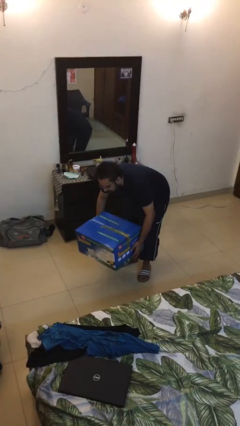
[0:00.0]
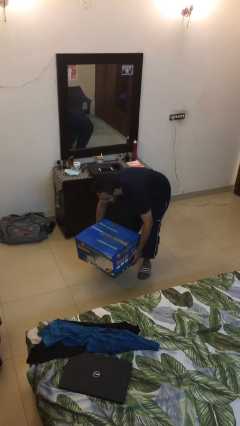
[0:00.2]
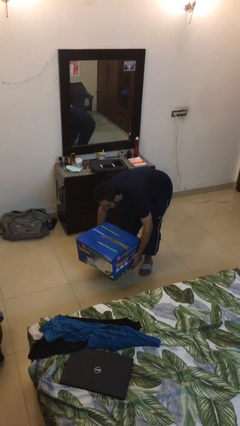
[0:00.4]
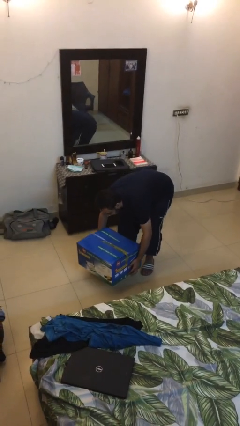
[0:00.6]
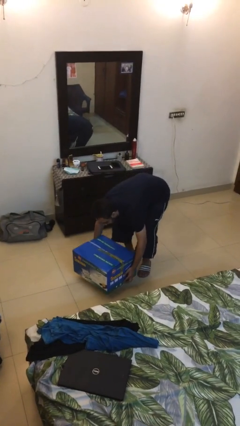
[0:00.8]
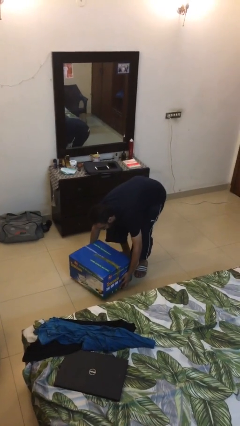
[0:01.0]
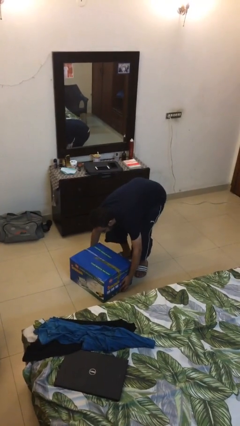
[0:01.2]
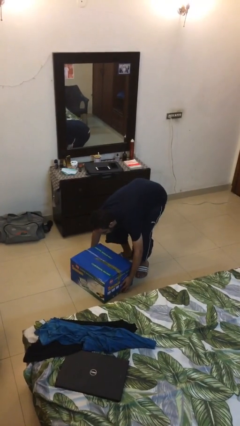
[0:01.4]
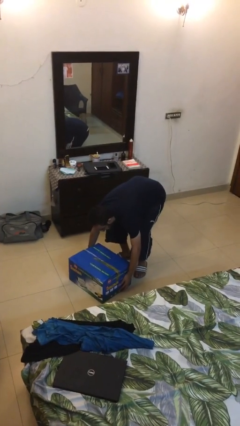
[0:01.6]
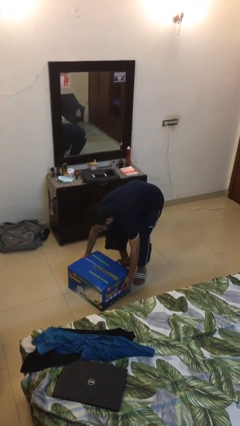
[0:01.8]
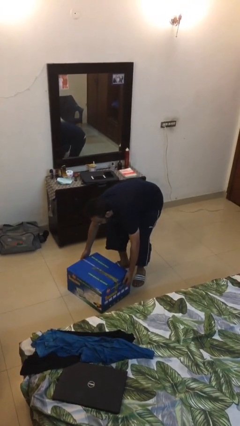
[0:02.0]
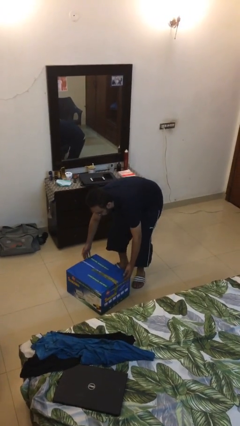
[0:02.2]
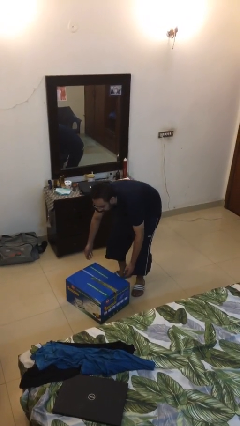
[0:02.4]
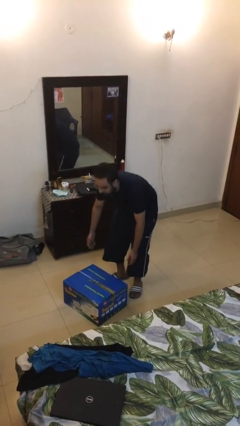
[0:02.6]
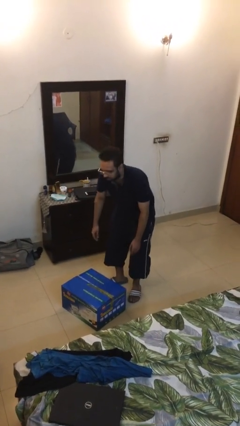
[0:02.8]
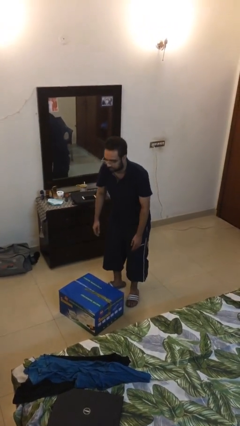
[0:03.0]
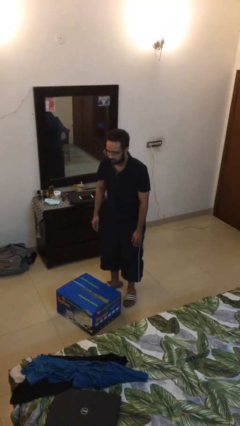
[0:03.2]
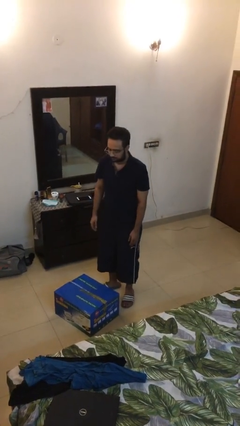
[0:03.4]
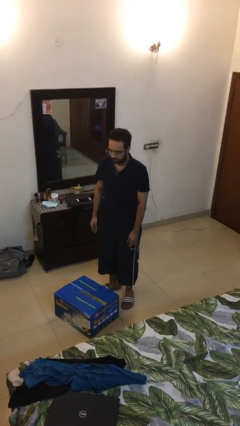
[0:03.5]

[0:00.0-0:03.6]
person puts down object on floor

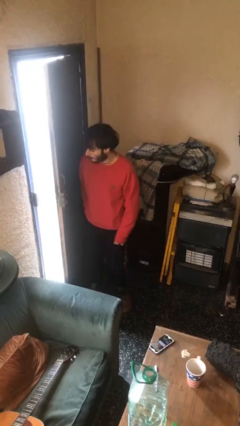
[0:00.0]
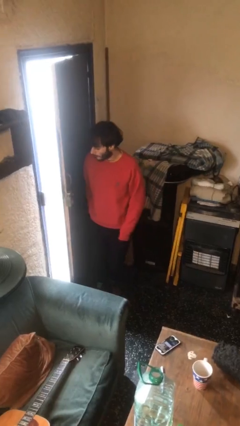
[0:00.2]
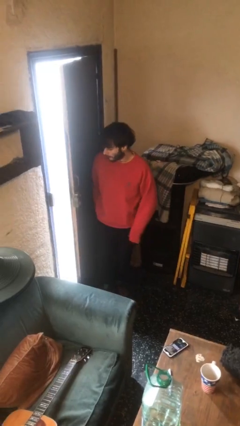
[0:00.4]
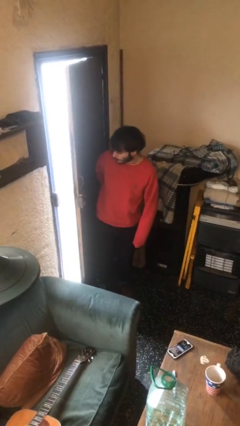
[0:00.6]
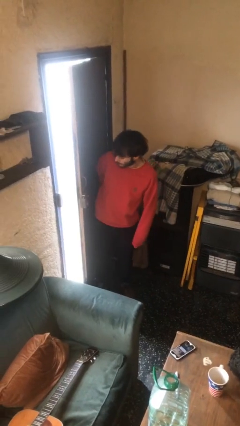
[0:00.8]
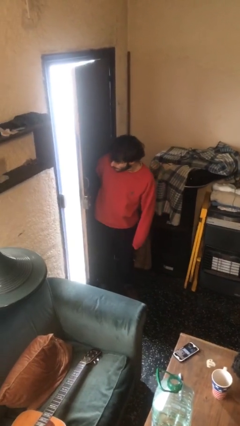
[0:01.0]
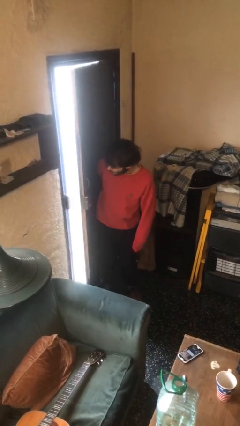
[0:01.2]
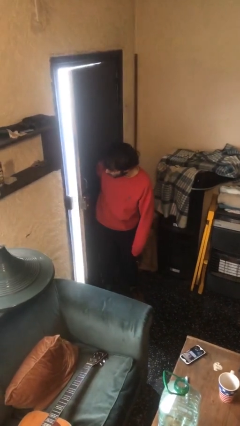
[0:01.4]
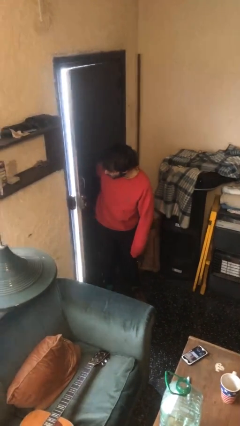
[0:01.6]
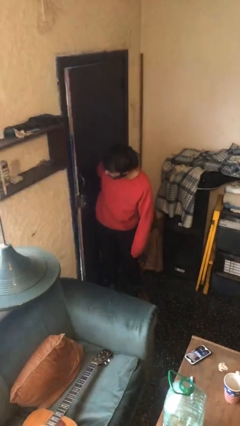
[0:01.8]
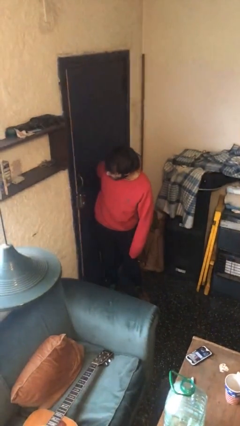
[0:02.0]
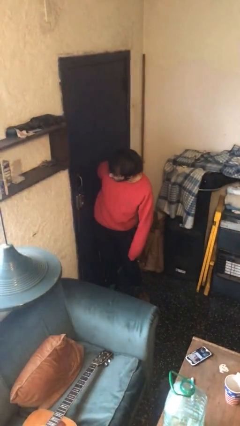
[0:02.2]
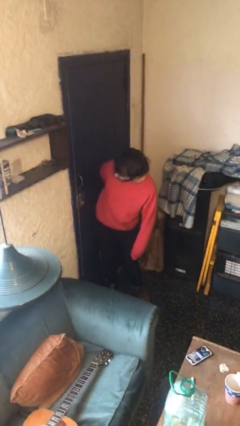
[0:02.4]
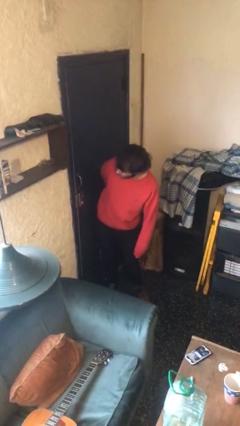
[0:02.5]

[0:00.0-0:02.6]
person closes door with hip

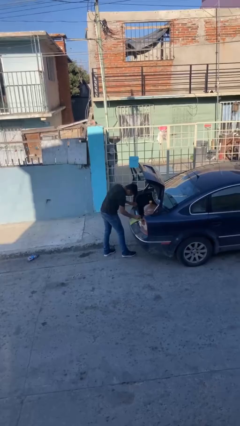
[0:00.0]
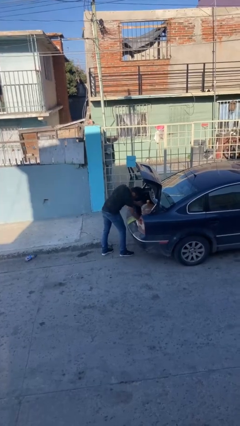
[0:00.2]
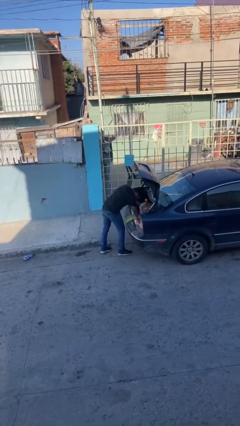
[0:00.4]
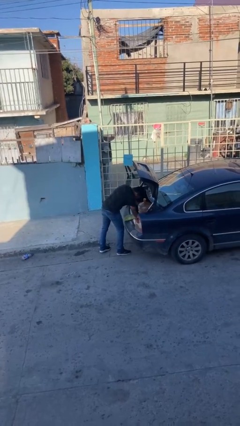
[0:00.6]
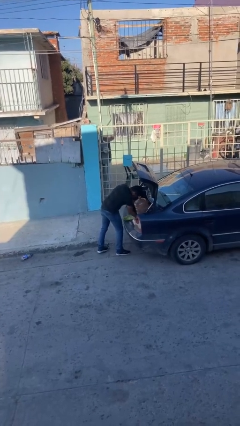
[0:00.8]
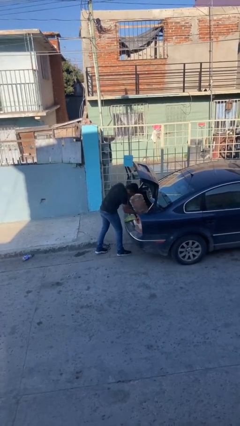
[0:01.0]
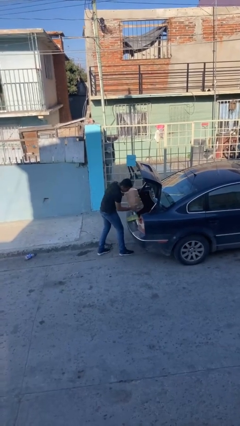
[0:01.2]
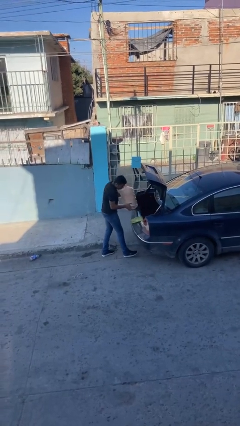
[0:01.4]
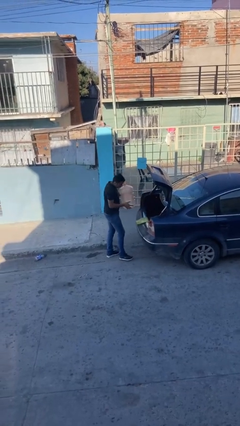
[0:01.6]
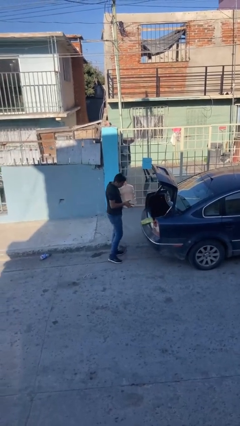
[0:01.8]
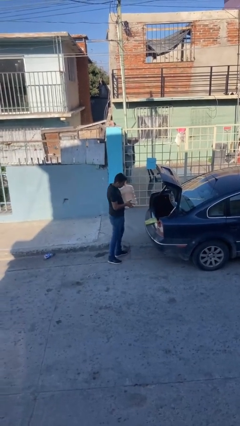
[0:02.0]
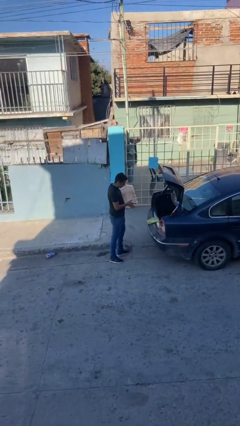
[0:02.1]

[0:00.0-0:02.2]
person unloads car

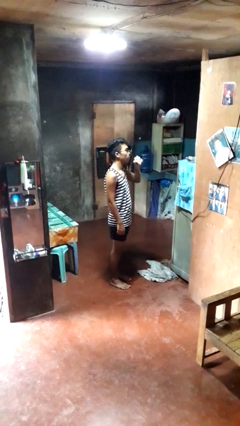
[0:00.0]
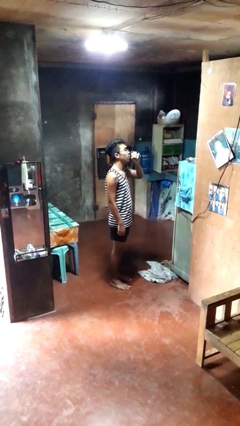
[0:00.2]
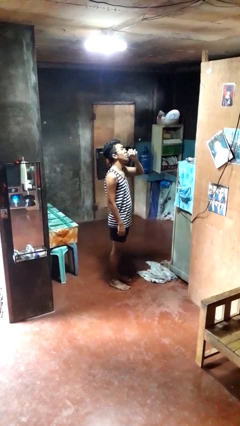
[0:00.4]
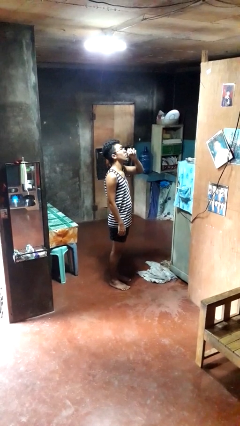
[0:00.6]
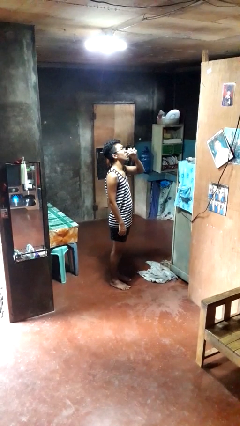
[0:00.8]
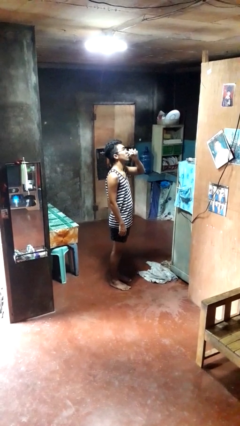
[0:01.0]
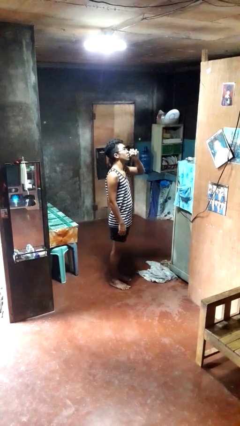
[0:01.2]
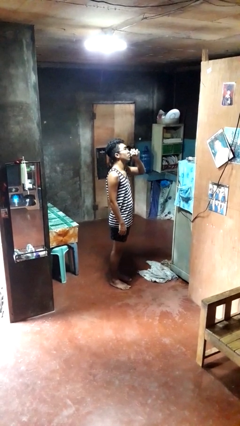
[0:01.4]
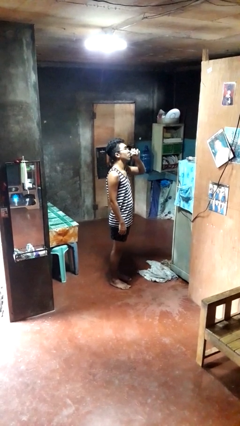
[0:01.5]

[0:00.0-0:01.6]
person drinks from beverage can

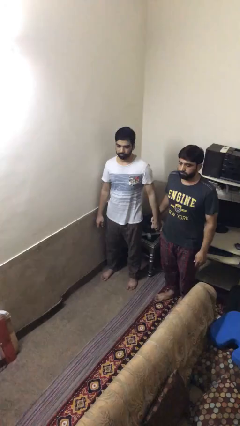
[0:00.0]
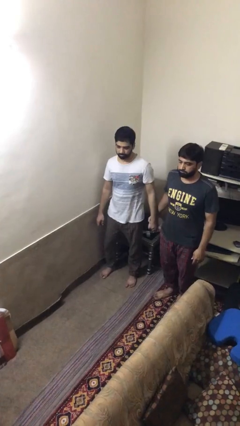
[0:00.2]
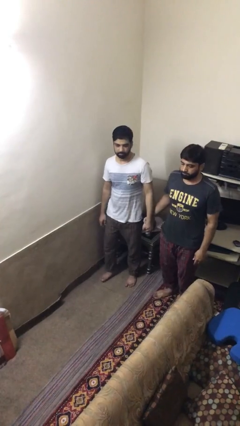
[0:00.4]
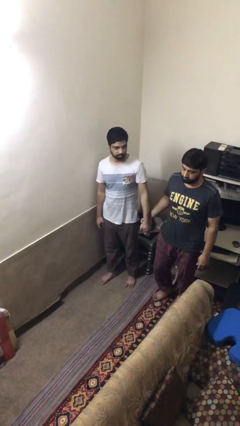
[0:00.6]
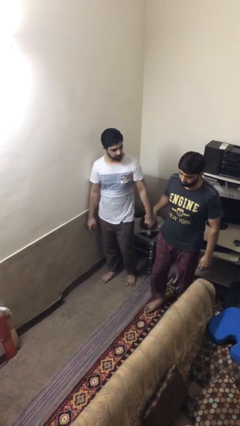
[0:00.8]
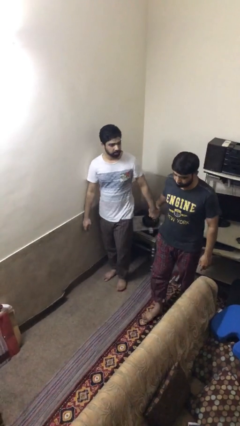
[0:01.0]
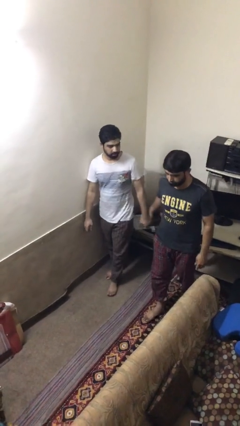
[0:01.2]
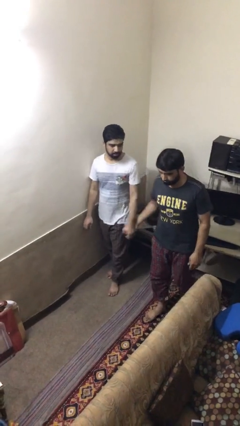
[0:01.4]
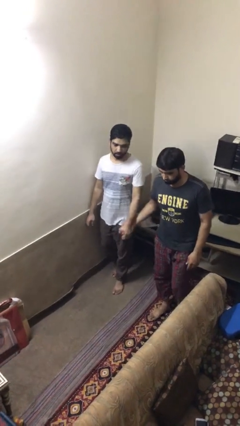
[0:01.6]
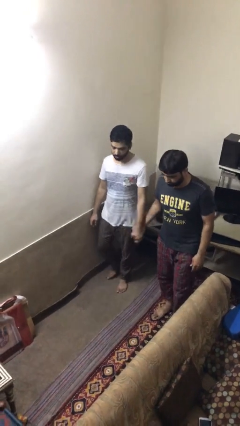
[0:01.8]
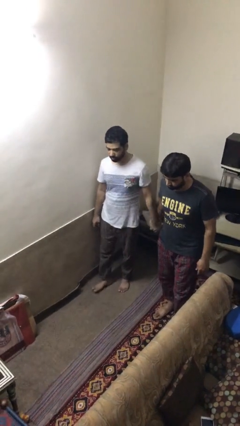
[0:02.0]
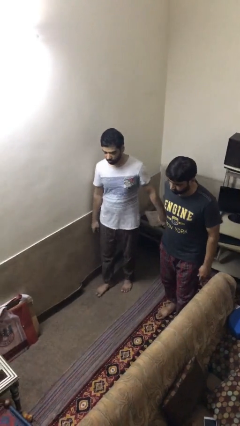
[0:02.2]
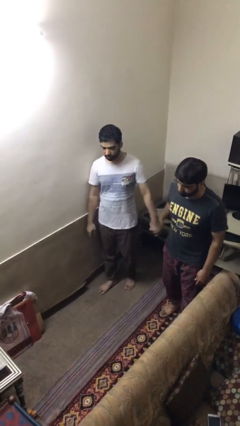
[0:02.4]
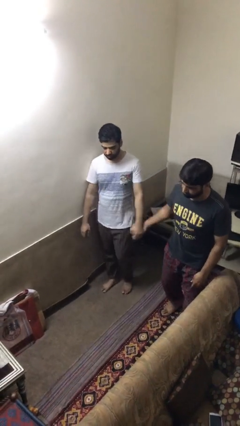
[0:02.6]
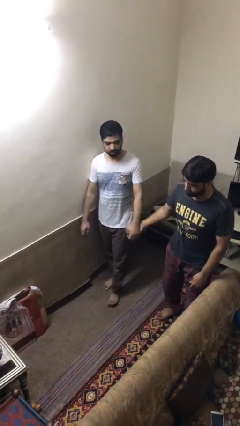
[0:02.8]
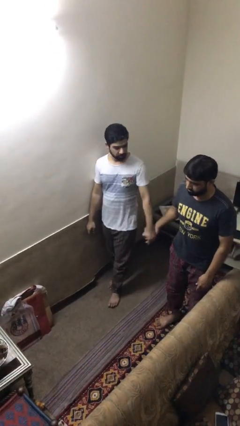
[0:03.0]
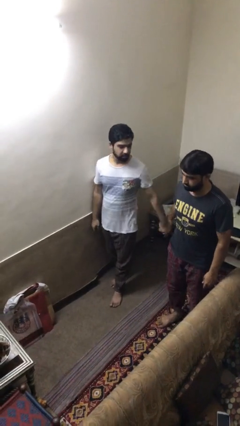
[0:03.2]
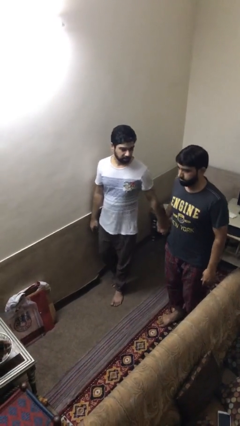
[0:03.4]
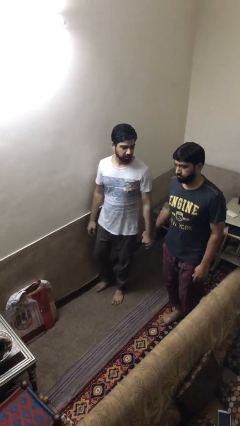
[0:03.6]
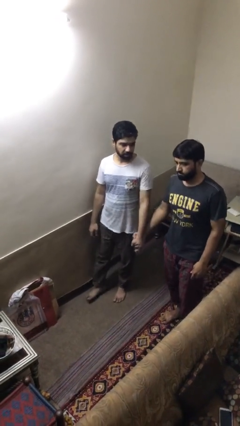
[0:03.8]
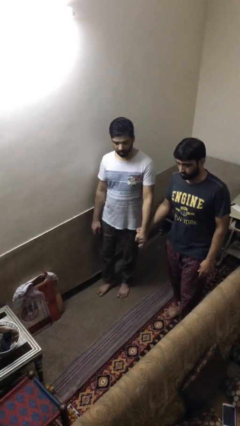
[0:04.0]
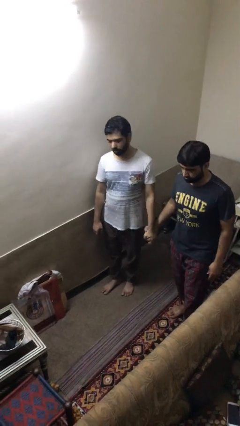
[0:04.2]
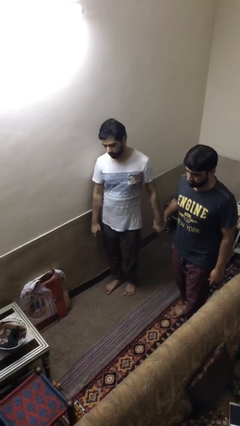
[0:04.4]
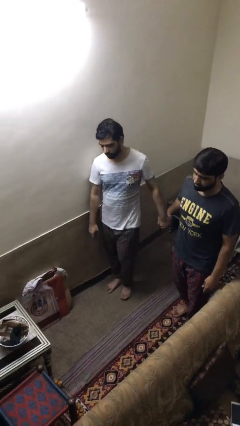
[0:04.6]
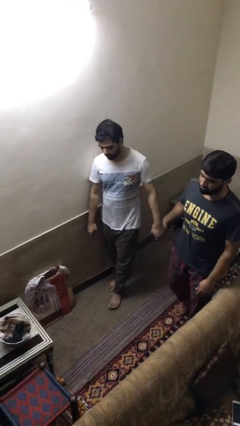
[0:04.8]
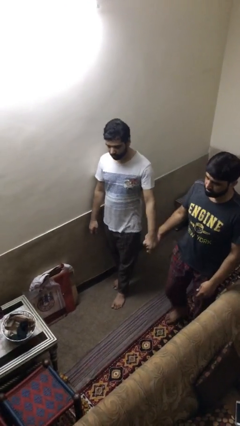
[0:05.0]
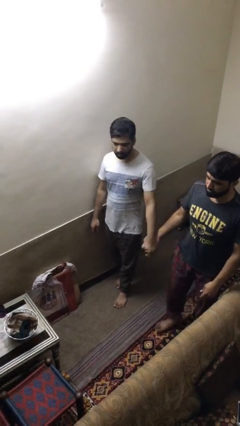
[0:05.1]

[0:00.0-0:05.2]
person holds hand

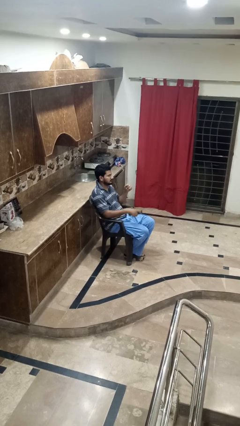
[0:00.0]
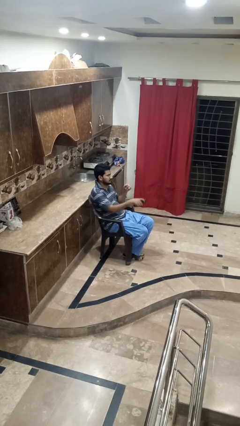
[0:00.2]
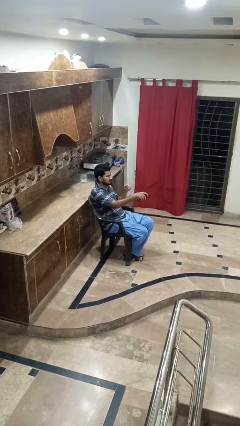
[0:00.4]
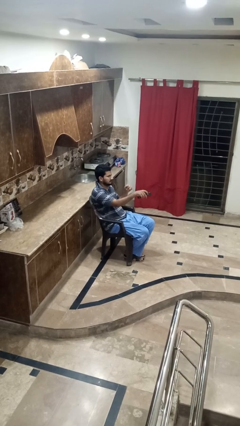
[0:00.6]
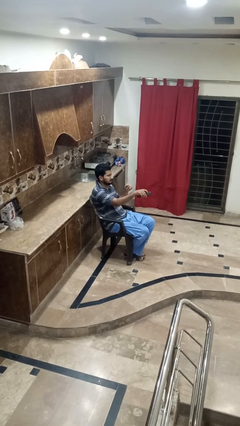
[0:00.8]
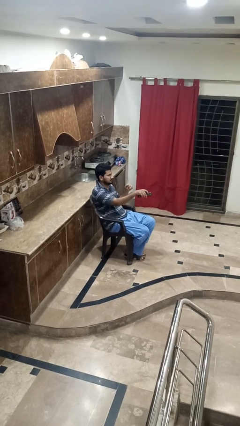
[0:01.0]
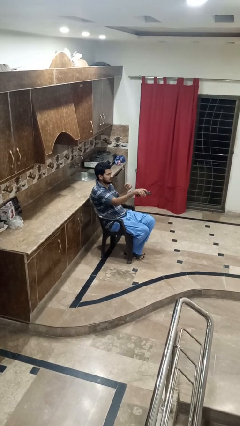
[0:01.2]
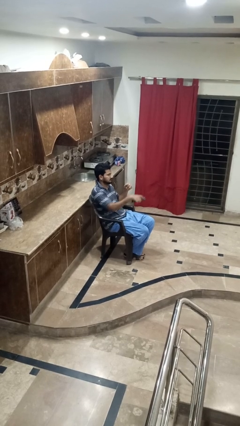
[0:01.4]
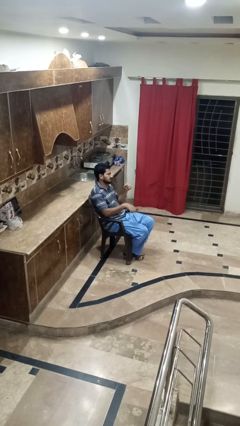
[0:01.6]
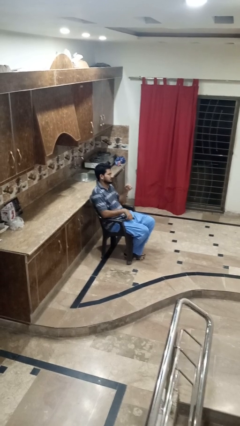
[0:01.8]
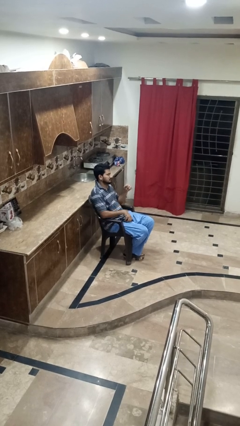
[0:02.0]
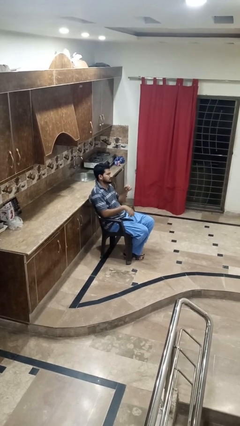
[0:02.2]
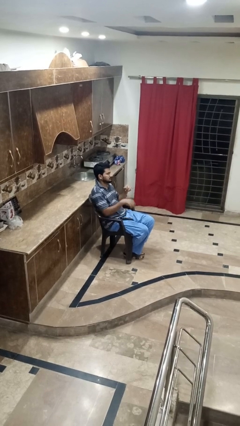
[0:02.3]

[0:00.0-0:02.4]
person uses television remote
